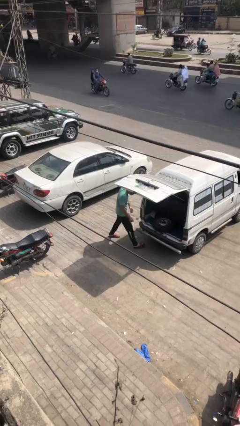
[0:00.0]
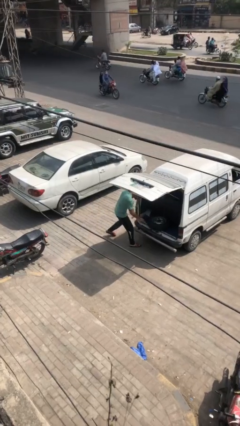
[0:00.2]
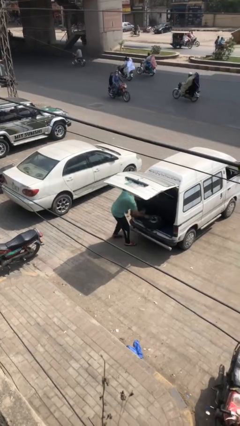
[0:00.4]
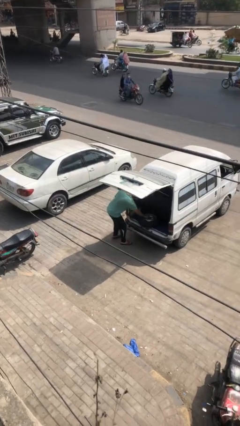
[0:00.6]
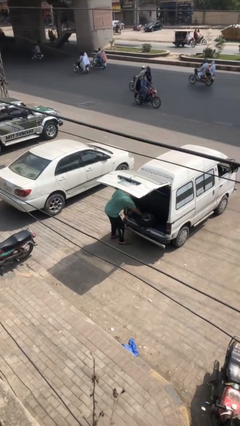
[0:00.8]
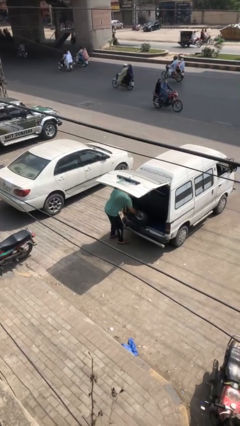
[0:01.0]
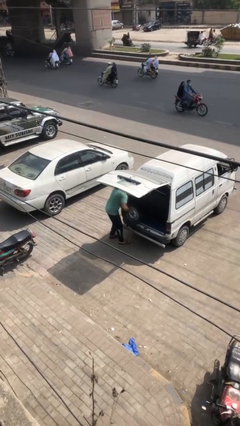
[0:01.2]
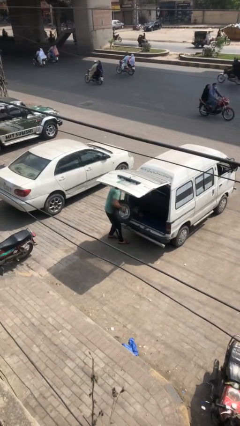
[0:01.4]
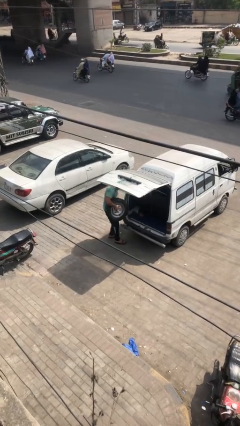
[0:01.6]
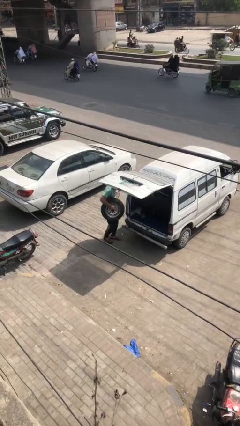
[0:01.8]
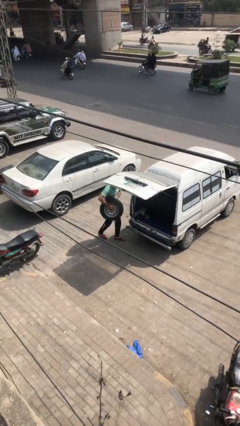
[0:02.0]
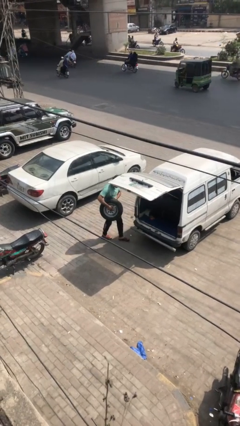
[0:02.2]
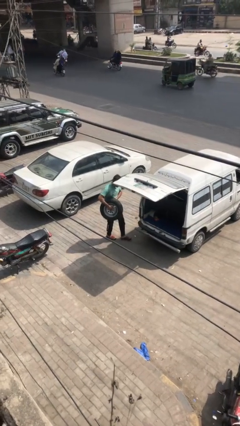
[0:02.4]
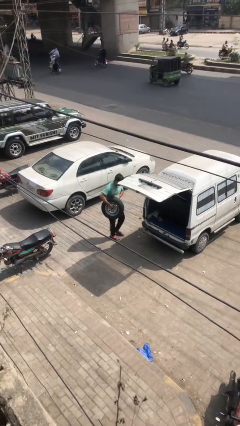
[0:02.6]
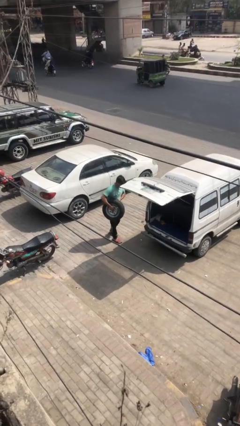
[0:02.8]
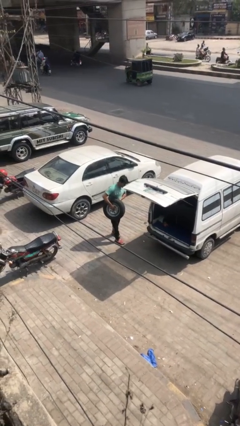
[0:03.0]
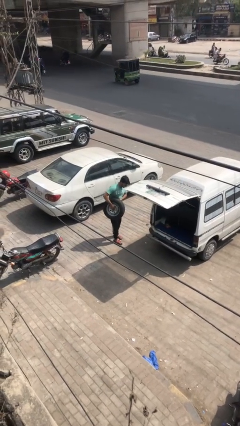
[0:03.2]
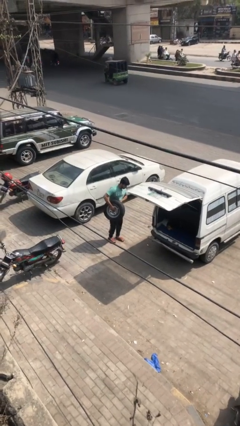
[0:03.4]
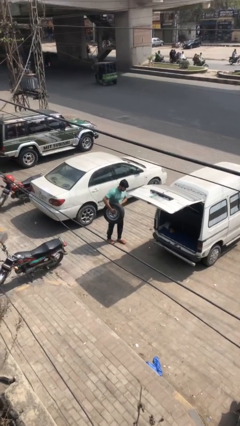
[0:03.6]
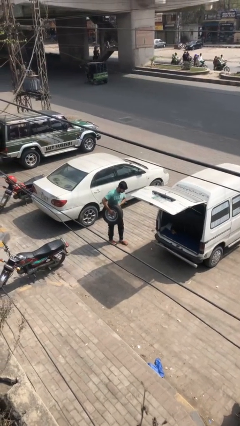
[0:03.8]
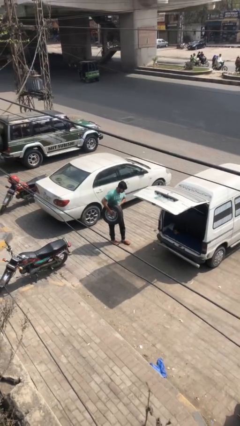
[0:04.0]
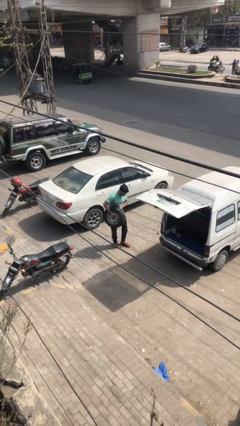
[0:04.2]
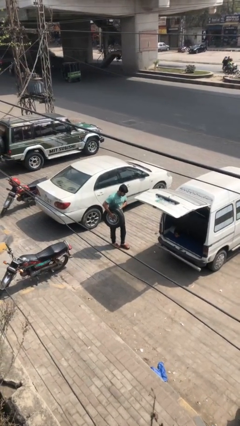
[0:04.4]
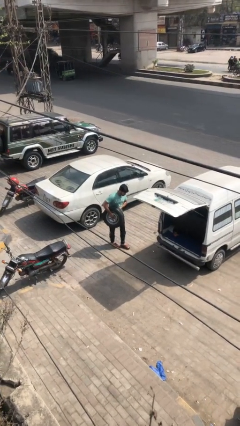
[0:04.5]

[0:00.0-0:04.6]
person unloads car

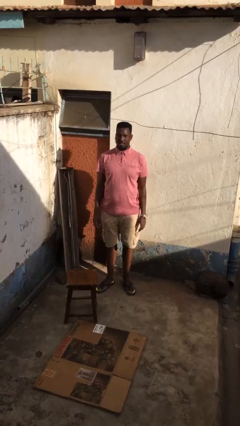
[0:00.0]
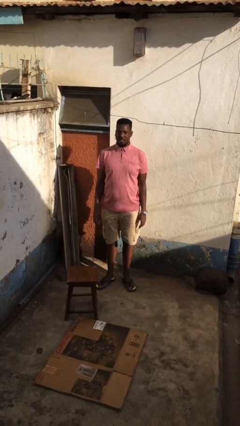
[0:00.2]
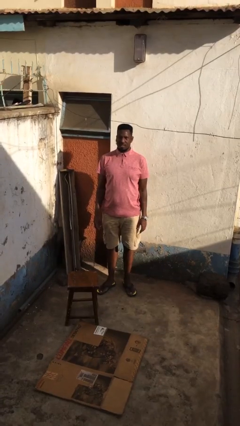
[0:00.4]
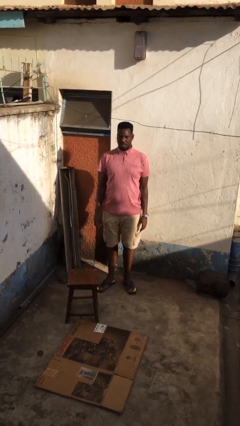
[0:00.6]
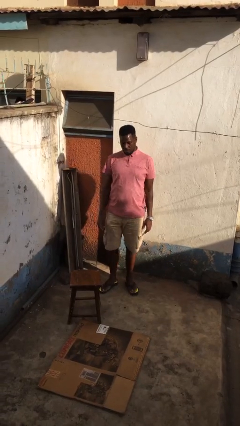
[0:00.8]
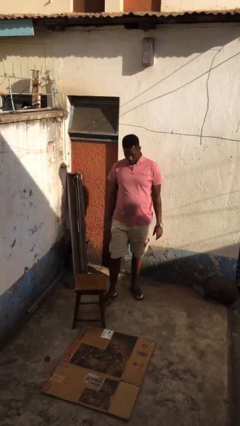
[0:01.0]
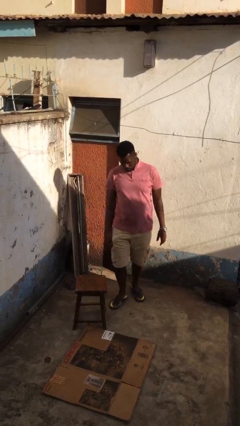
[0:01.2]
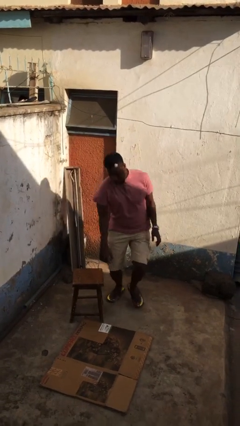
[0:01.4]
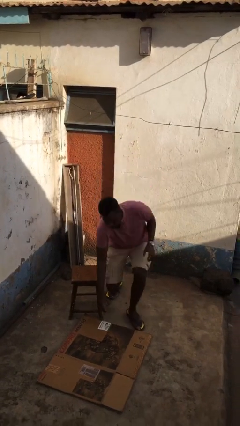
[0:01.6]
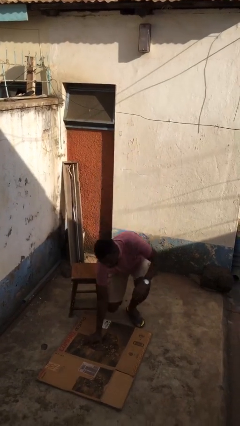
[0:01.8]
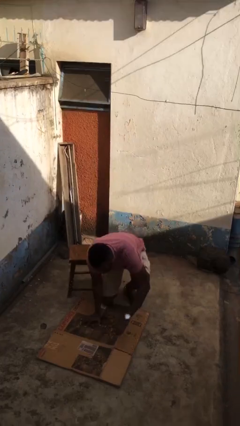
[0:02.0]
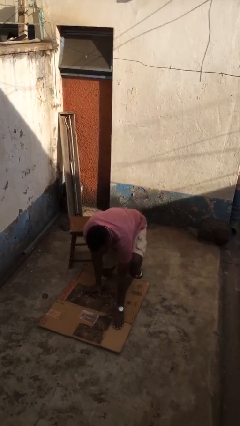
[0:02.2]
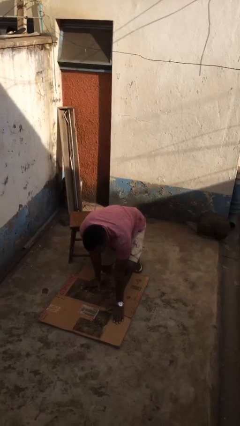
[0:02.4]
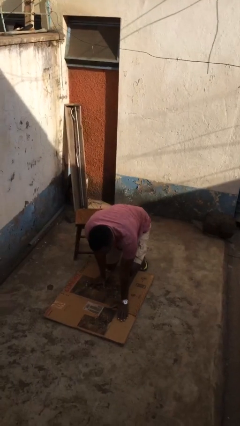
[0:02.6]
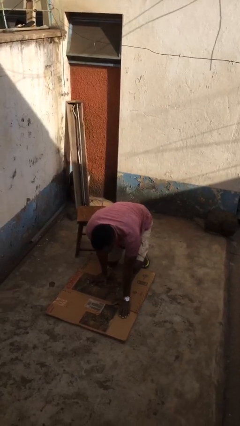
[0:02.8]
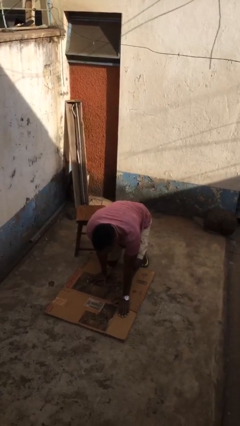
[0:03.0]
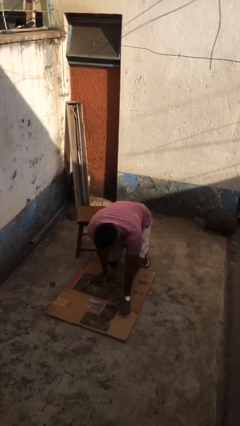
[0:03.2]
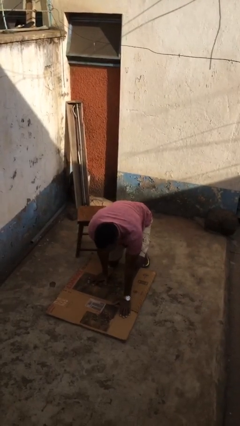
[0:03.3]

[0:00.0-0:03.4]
person trips on object on floor

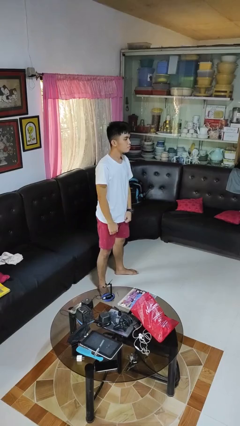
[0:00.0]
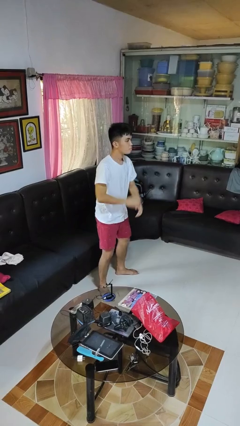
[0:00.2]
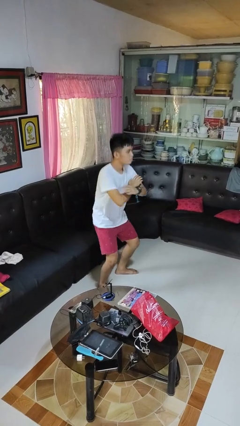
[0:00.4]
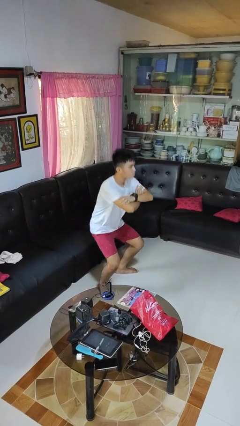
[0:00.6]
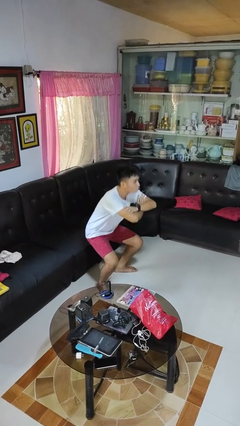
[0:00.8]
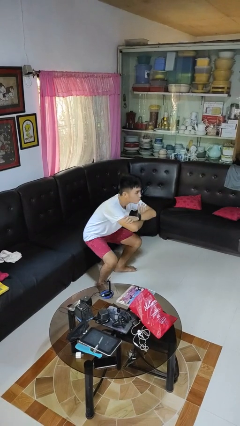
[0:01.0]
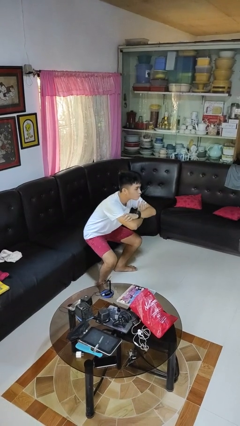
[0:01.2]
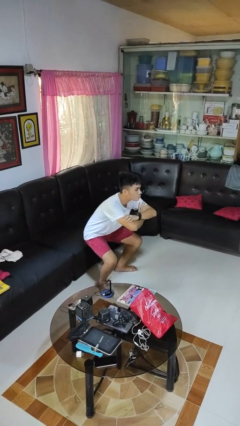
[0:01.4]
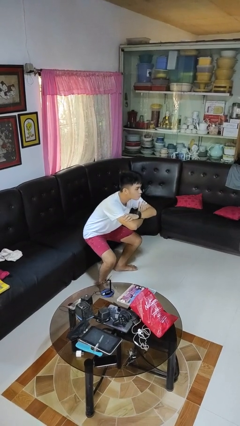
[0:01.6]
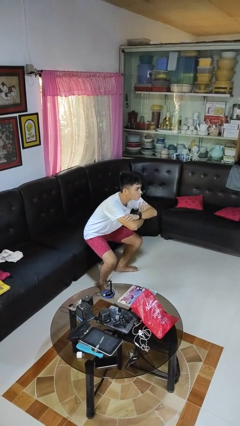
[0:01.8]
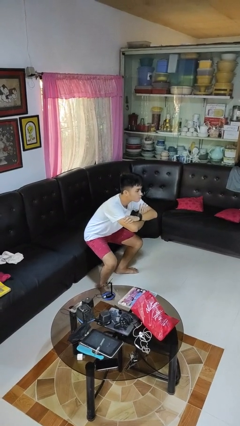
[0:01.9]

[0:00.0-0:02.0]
person squats

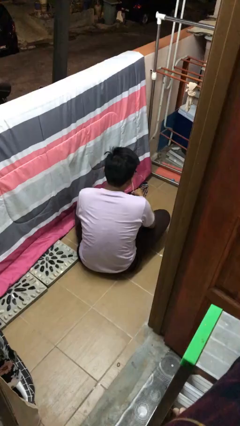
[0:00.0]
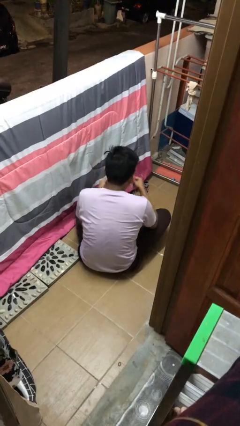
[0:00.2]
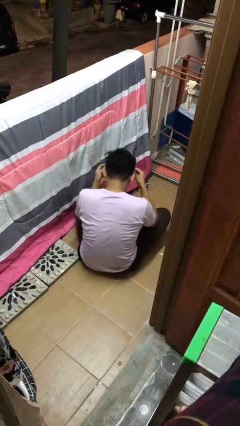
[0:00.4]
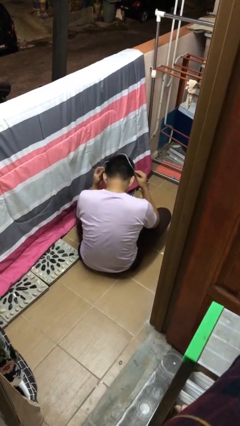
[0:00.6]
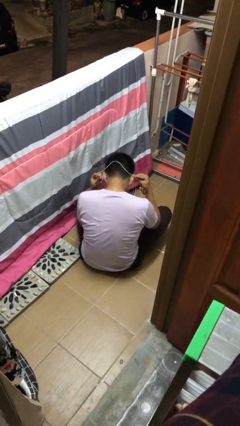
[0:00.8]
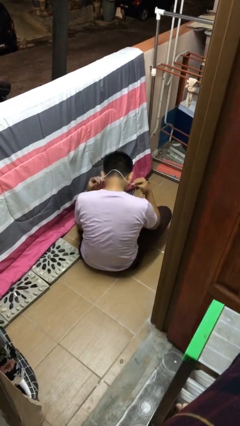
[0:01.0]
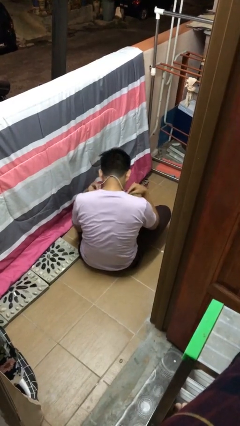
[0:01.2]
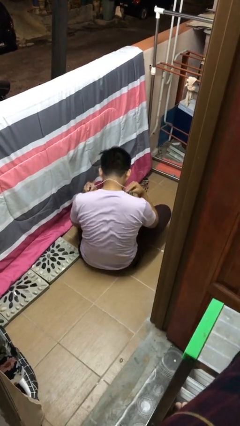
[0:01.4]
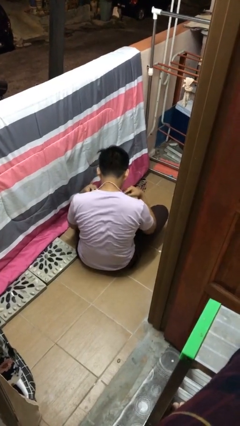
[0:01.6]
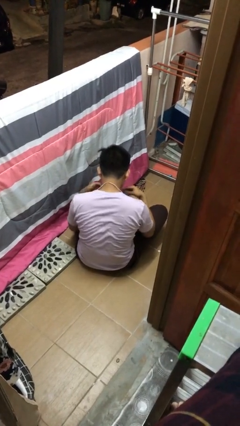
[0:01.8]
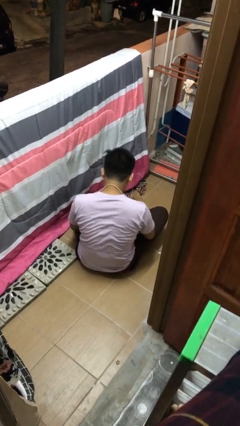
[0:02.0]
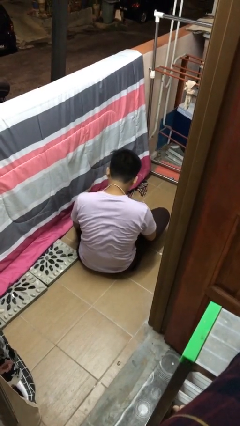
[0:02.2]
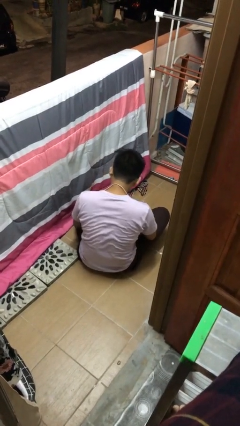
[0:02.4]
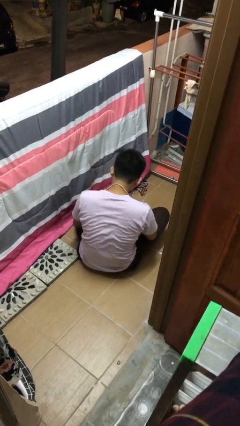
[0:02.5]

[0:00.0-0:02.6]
person puts on necklace

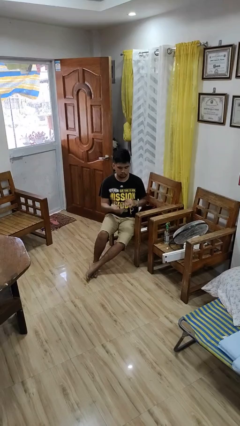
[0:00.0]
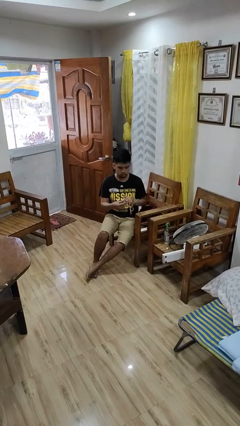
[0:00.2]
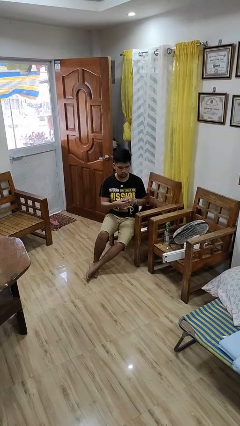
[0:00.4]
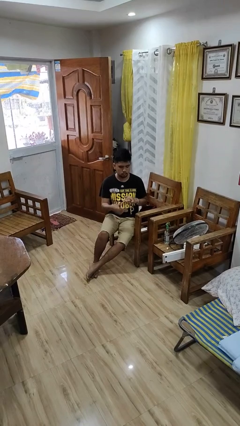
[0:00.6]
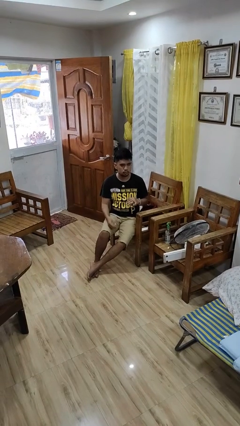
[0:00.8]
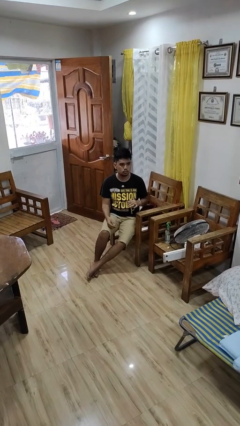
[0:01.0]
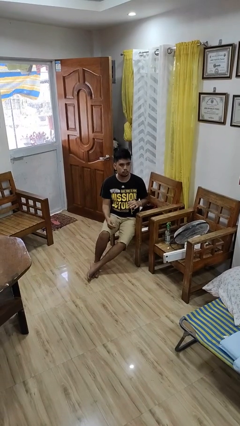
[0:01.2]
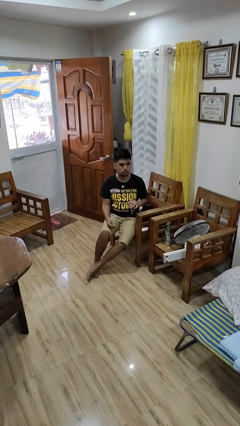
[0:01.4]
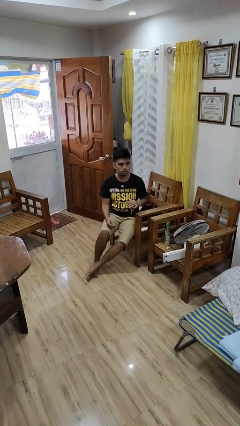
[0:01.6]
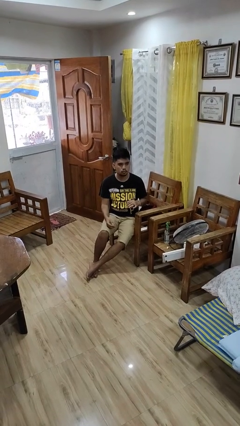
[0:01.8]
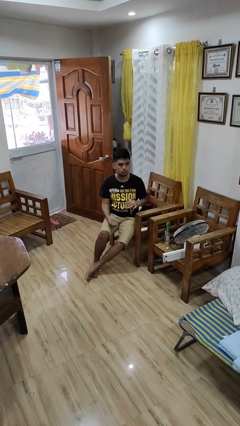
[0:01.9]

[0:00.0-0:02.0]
person puts on ring

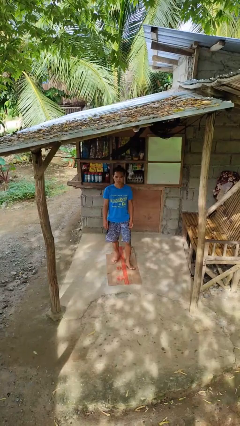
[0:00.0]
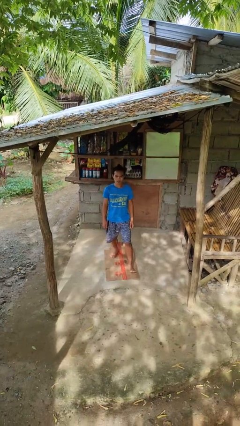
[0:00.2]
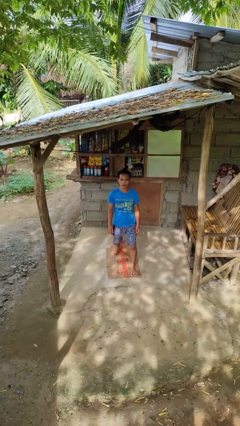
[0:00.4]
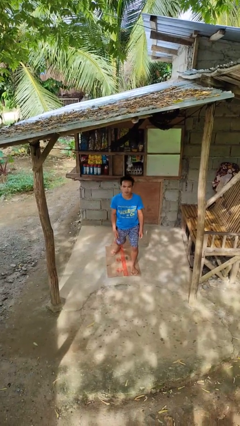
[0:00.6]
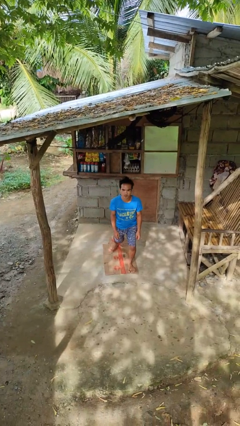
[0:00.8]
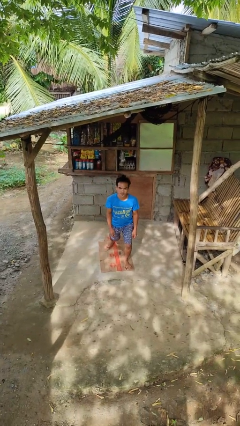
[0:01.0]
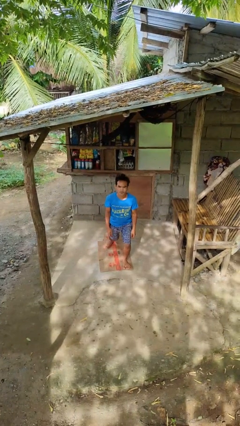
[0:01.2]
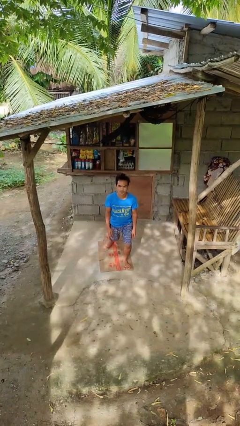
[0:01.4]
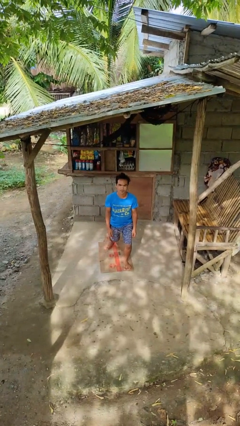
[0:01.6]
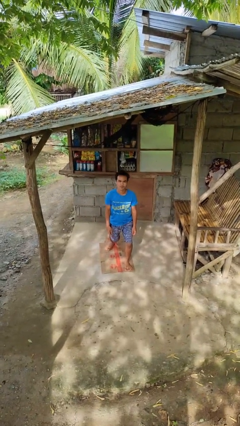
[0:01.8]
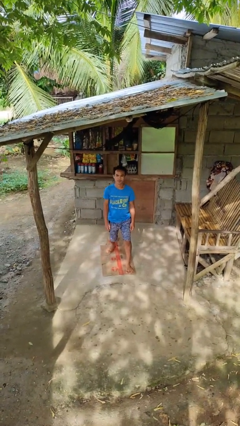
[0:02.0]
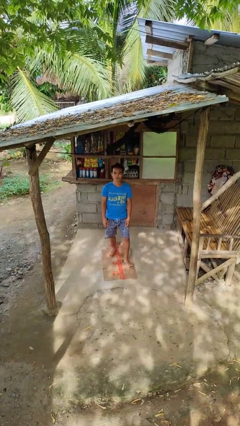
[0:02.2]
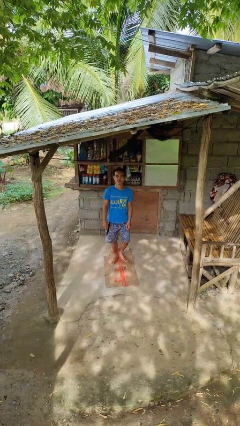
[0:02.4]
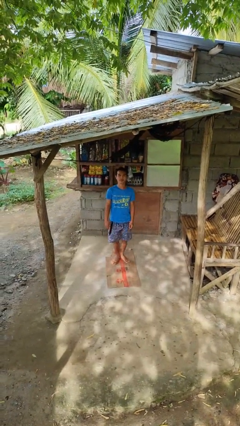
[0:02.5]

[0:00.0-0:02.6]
person exercises with lunges
